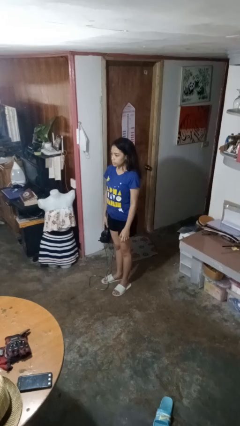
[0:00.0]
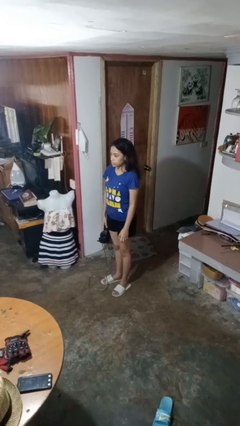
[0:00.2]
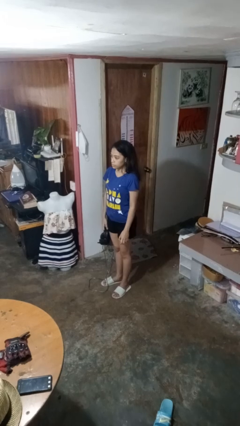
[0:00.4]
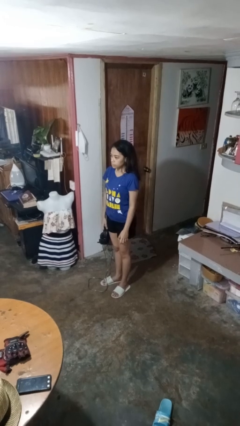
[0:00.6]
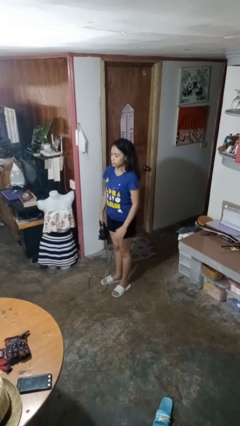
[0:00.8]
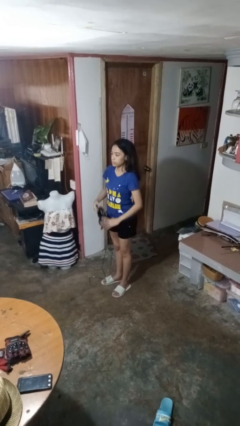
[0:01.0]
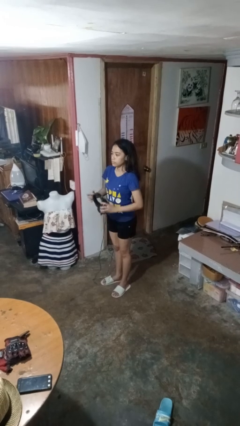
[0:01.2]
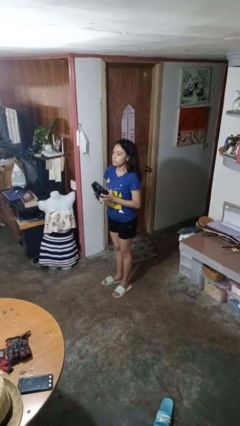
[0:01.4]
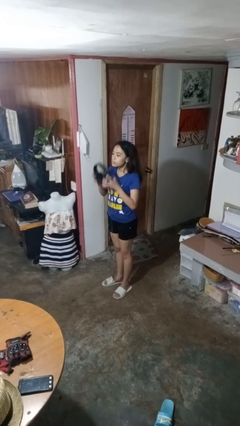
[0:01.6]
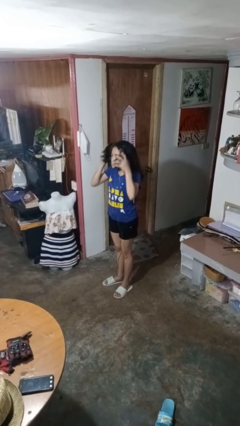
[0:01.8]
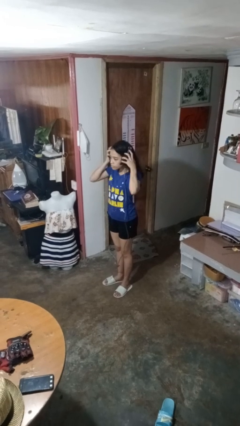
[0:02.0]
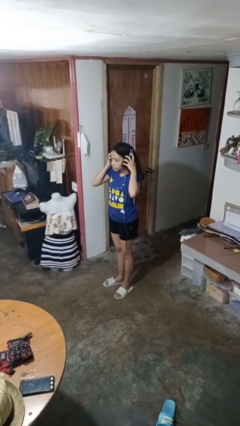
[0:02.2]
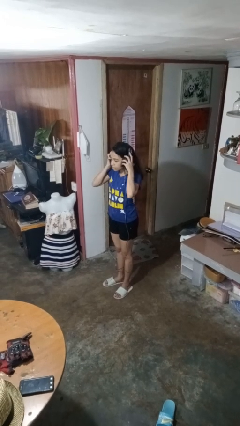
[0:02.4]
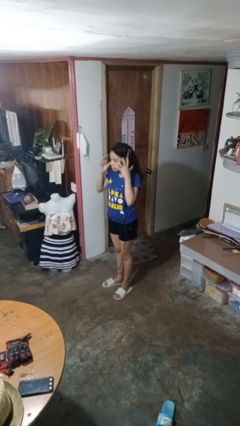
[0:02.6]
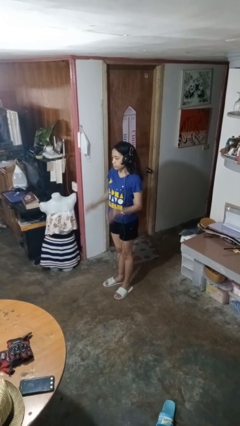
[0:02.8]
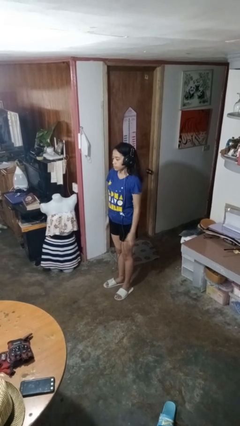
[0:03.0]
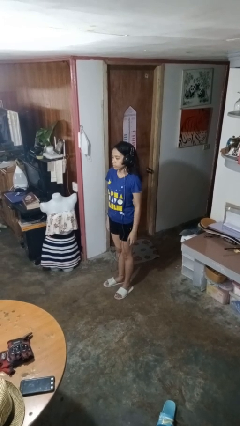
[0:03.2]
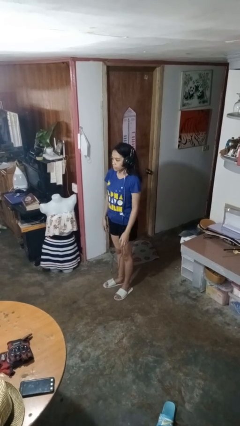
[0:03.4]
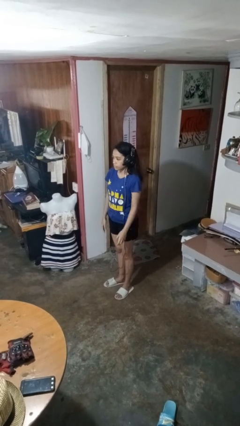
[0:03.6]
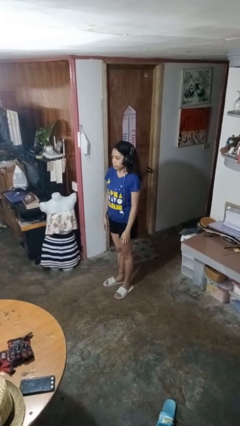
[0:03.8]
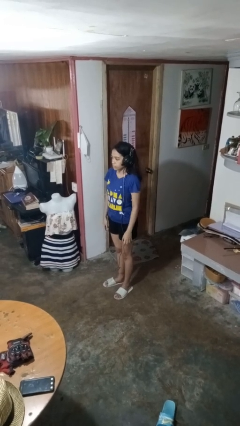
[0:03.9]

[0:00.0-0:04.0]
person puts on headphones

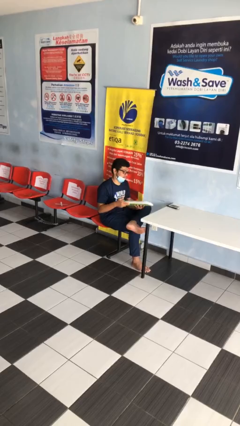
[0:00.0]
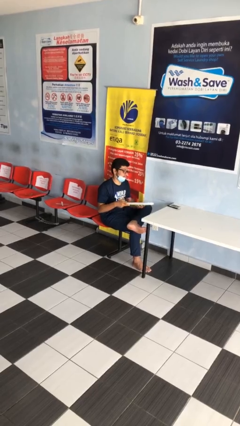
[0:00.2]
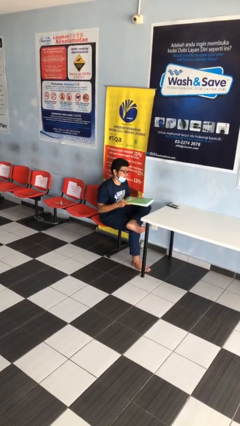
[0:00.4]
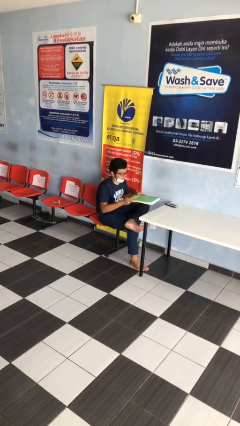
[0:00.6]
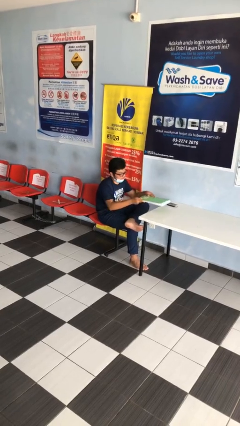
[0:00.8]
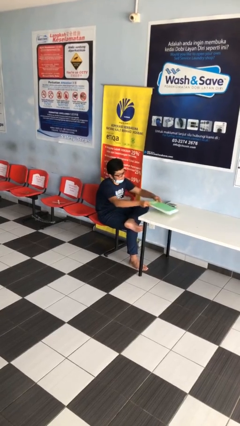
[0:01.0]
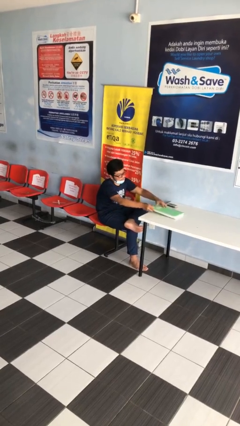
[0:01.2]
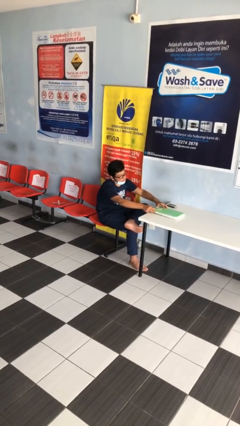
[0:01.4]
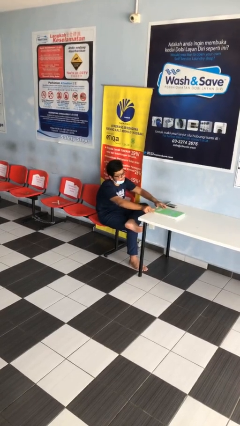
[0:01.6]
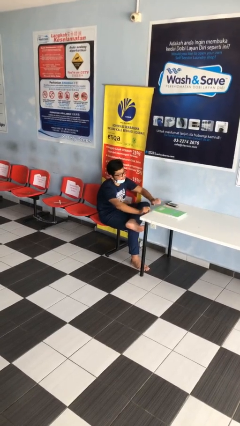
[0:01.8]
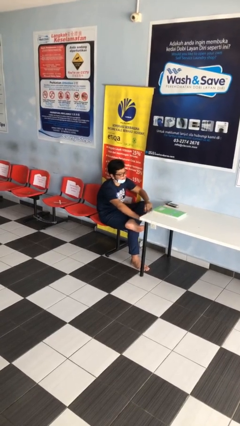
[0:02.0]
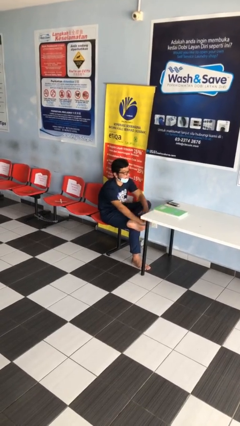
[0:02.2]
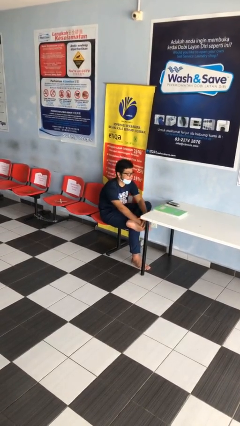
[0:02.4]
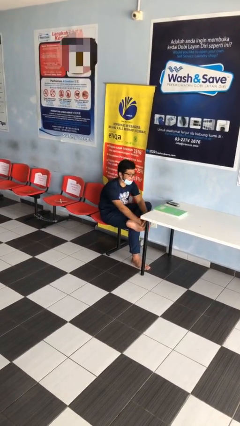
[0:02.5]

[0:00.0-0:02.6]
person puts down object on table

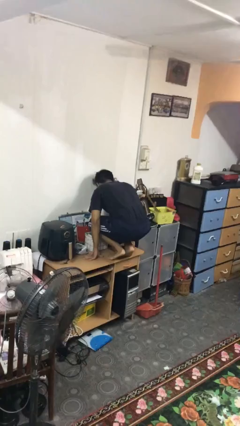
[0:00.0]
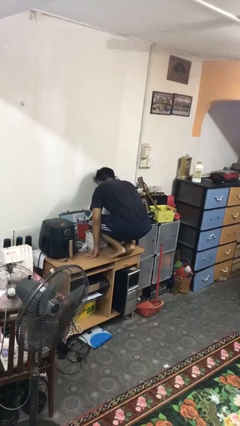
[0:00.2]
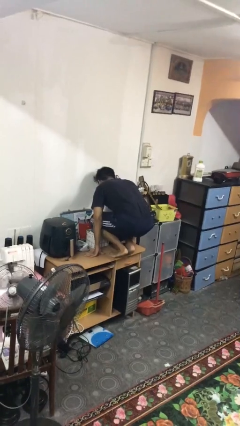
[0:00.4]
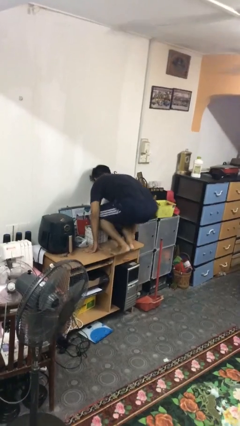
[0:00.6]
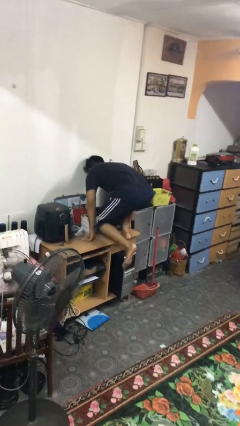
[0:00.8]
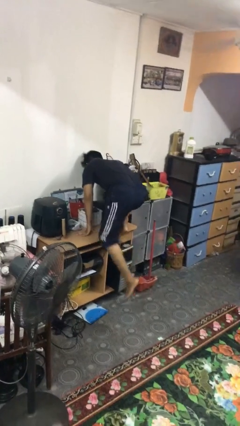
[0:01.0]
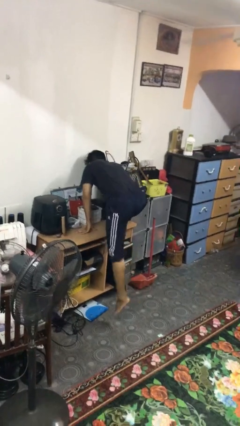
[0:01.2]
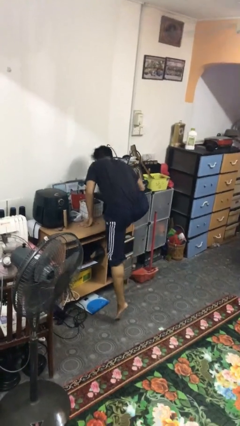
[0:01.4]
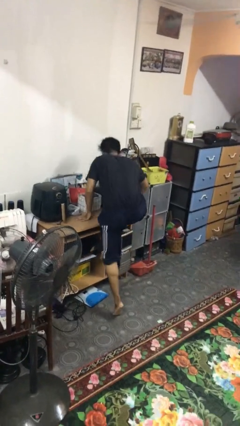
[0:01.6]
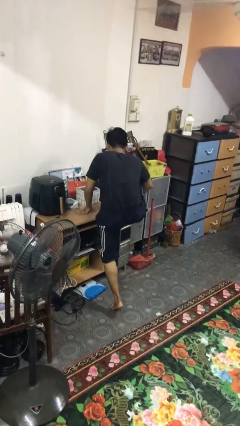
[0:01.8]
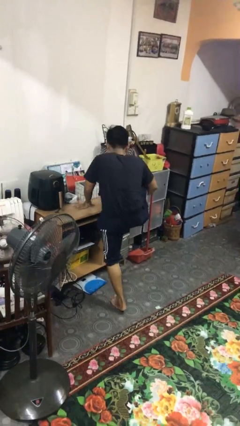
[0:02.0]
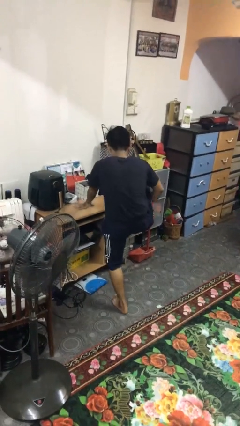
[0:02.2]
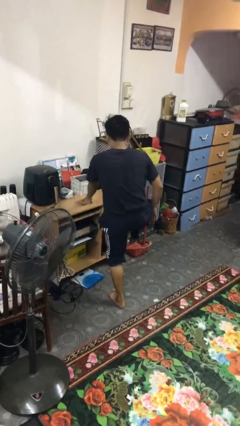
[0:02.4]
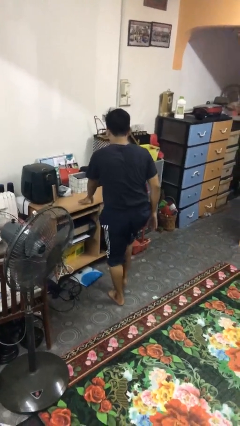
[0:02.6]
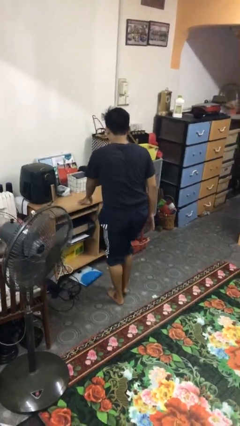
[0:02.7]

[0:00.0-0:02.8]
person climbs off table

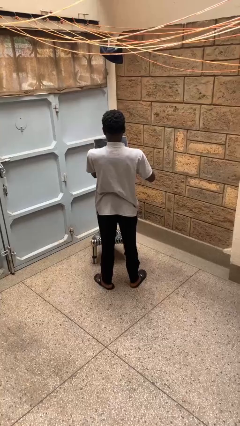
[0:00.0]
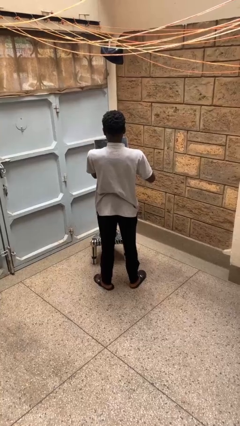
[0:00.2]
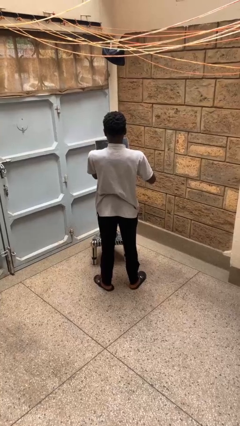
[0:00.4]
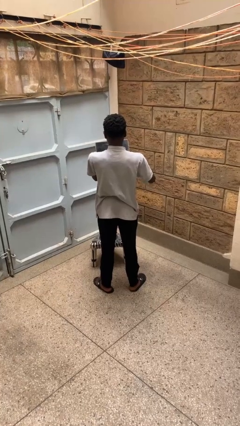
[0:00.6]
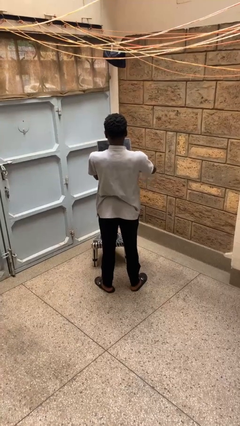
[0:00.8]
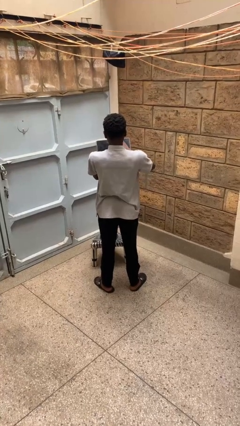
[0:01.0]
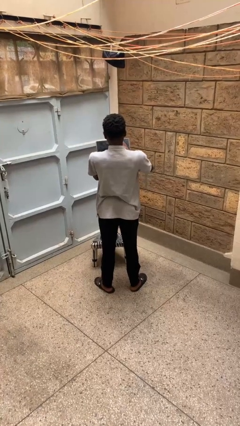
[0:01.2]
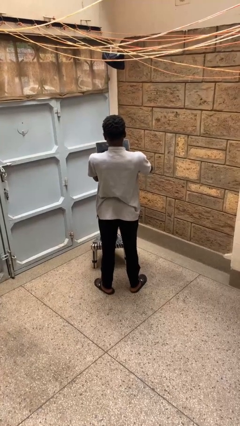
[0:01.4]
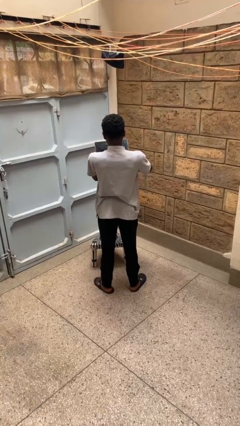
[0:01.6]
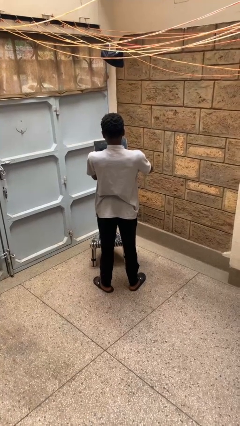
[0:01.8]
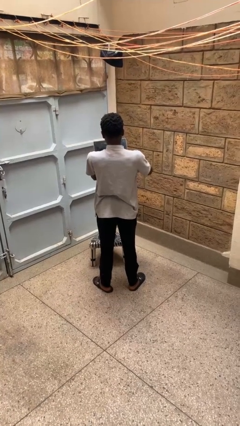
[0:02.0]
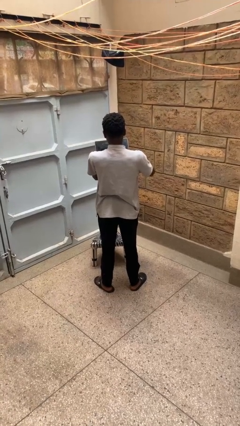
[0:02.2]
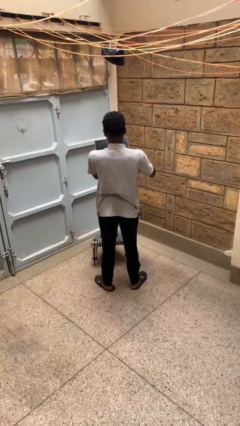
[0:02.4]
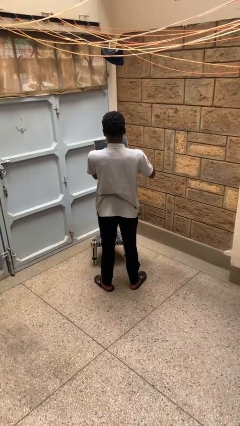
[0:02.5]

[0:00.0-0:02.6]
person interacts with tablet

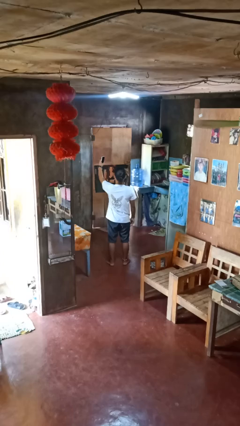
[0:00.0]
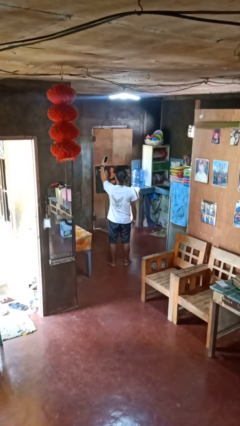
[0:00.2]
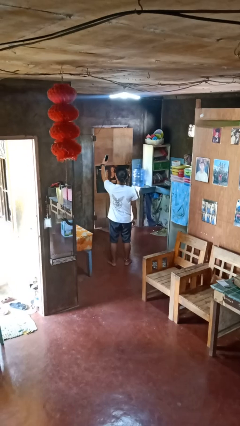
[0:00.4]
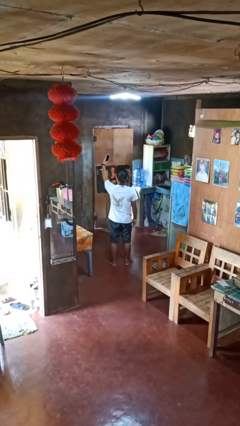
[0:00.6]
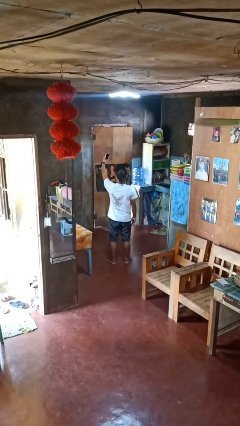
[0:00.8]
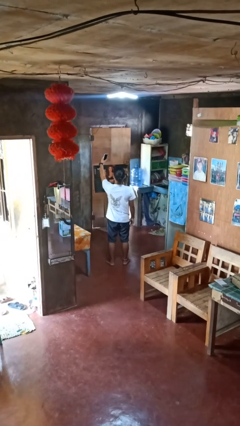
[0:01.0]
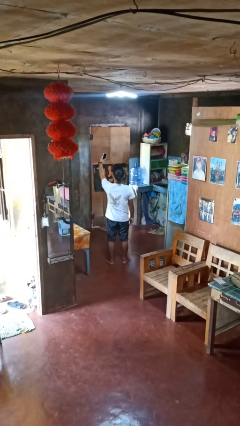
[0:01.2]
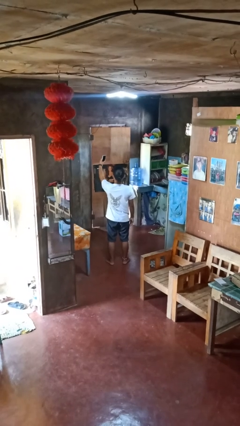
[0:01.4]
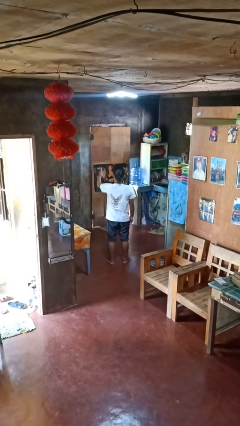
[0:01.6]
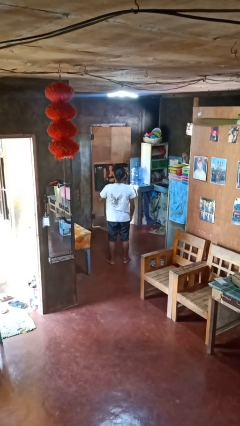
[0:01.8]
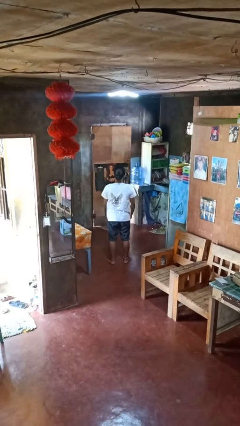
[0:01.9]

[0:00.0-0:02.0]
person takes selfie

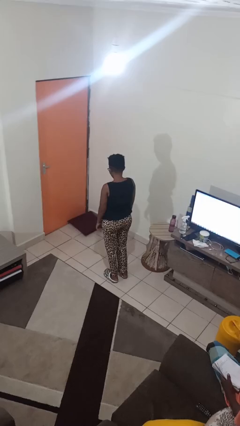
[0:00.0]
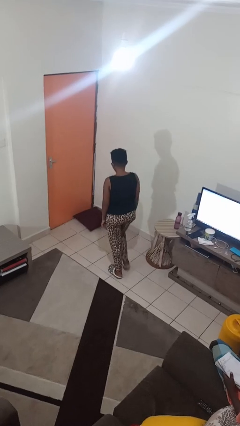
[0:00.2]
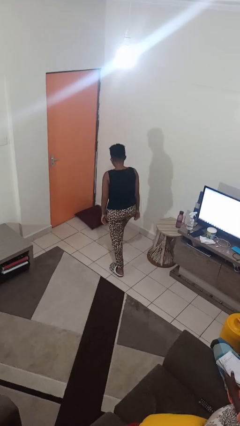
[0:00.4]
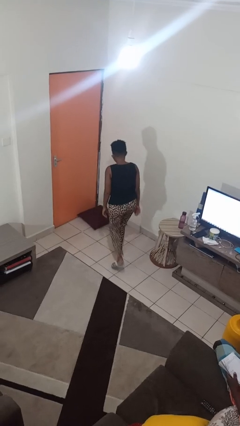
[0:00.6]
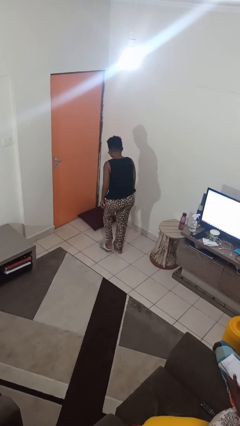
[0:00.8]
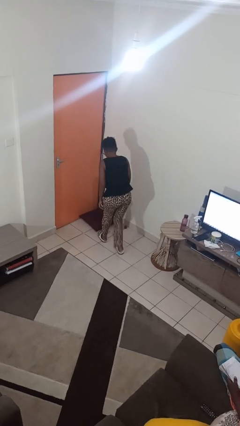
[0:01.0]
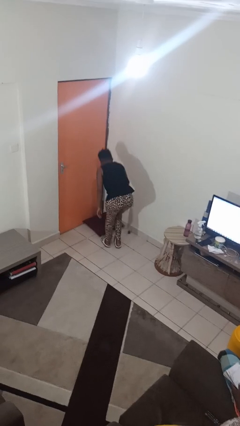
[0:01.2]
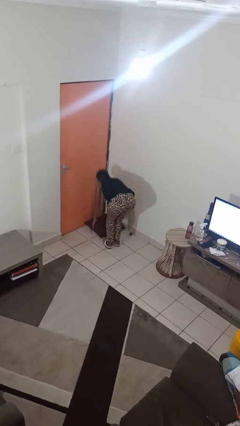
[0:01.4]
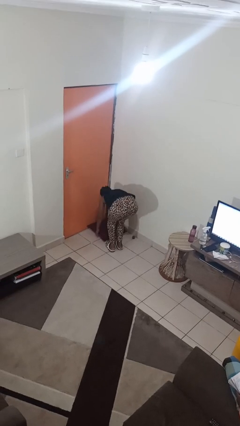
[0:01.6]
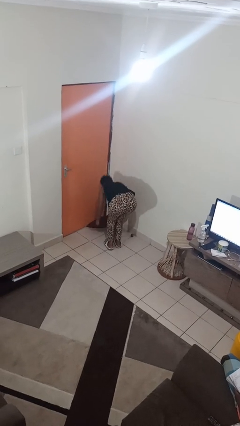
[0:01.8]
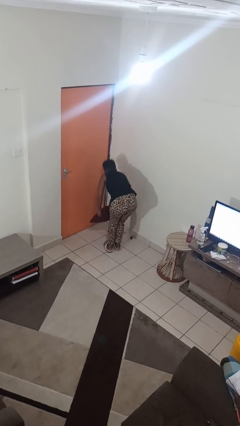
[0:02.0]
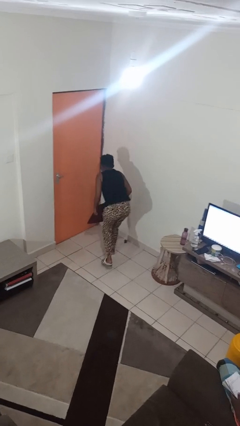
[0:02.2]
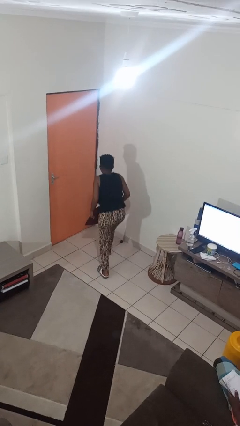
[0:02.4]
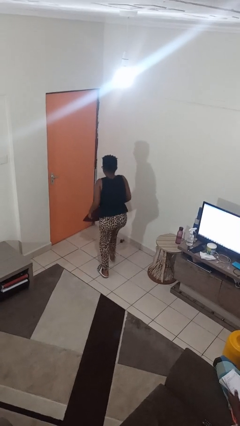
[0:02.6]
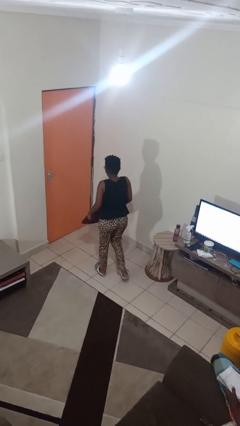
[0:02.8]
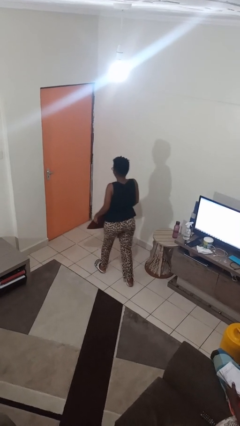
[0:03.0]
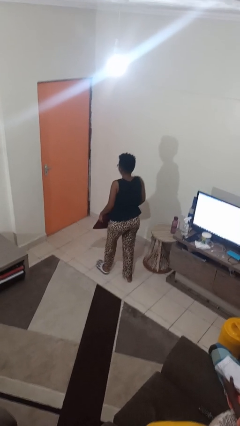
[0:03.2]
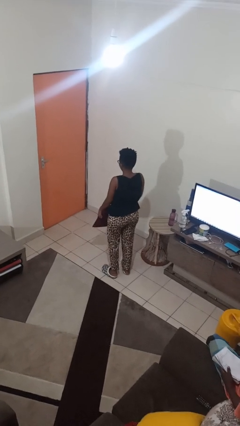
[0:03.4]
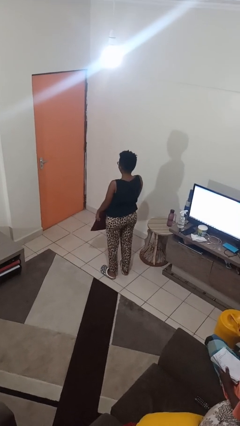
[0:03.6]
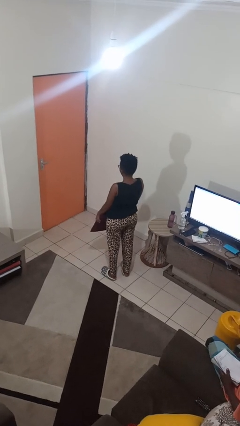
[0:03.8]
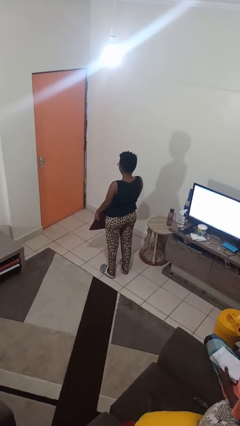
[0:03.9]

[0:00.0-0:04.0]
person picks up object from floor
